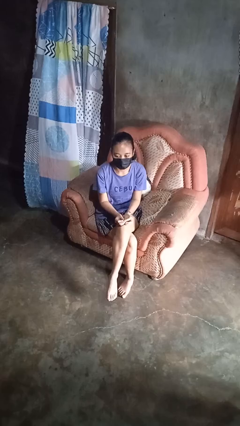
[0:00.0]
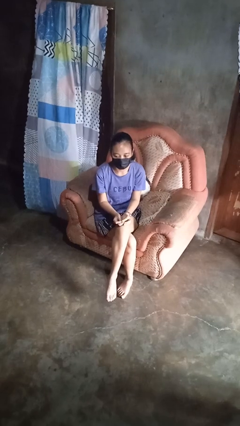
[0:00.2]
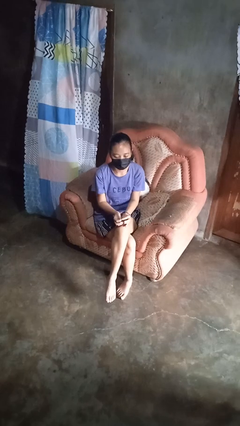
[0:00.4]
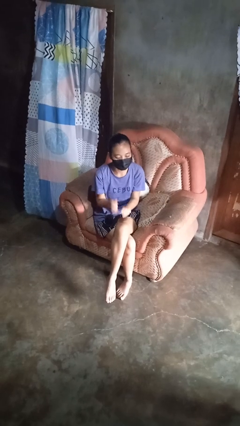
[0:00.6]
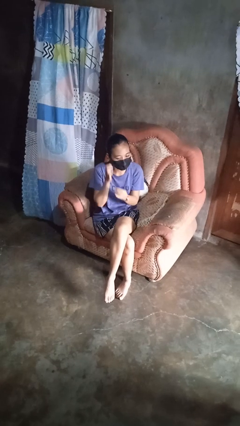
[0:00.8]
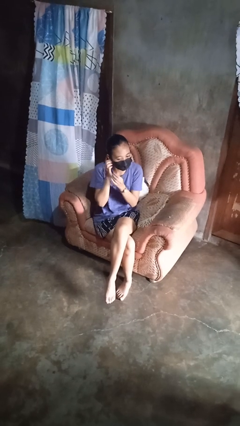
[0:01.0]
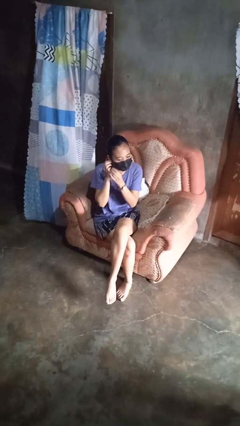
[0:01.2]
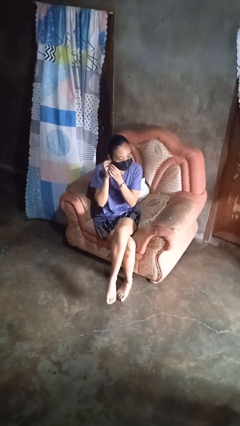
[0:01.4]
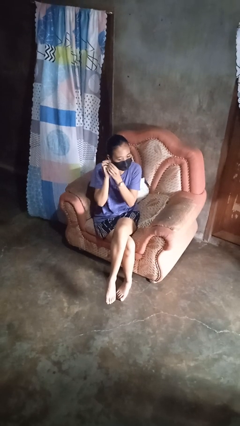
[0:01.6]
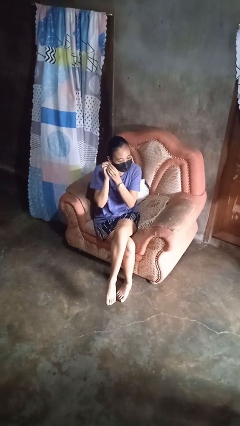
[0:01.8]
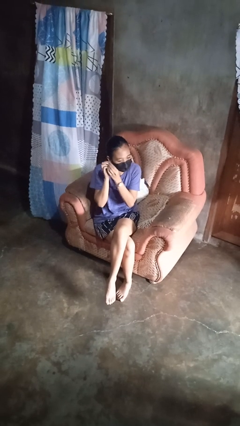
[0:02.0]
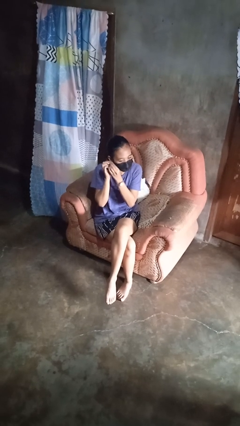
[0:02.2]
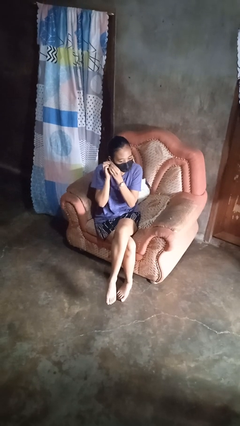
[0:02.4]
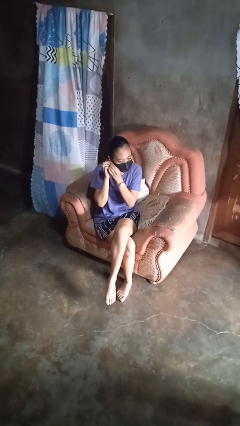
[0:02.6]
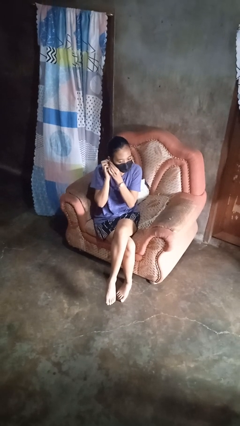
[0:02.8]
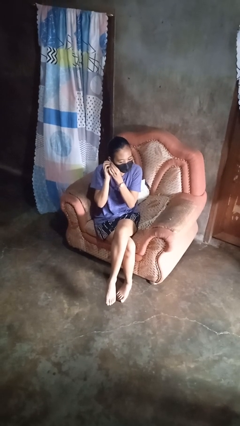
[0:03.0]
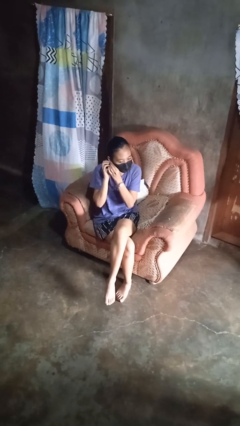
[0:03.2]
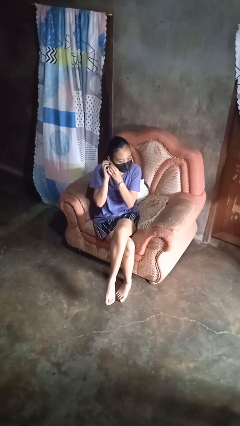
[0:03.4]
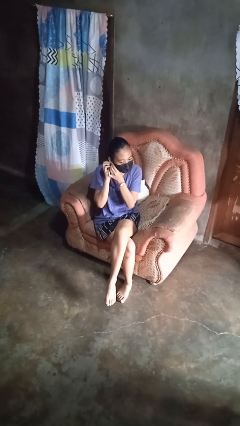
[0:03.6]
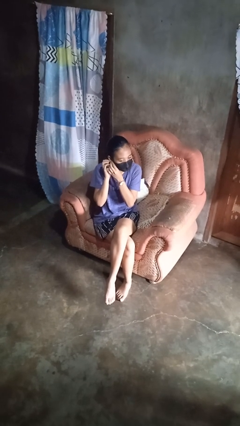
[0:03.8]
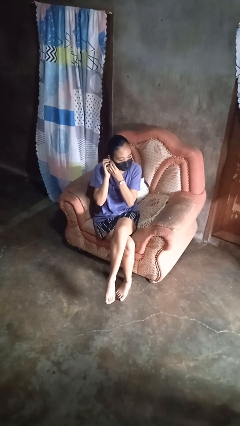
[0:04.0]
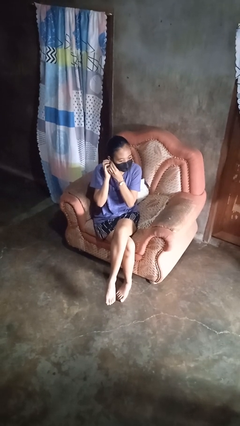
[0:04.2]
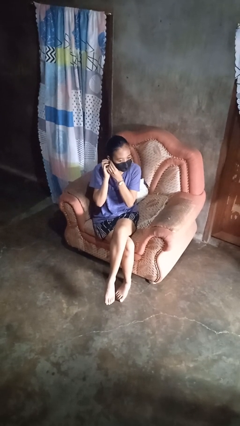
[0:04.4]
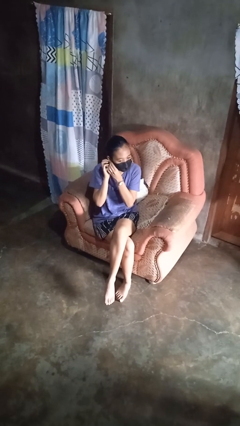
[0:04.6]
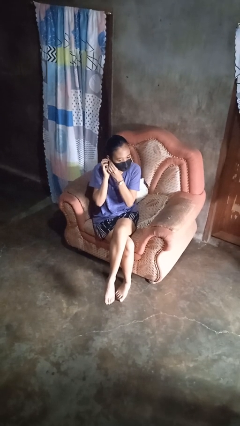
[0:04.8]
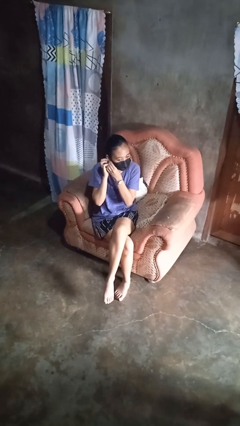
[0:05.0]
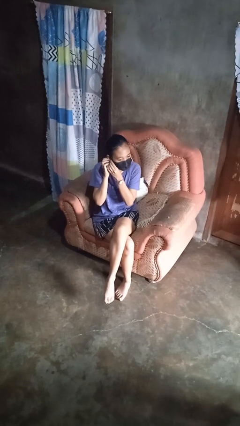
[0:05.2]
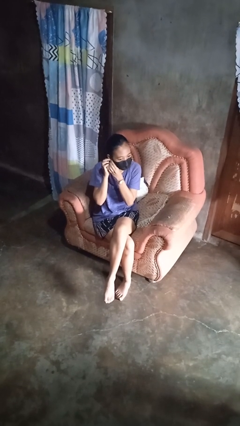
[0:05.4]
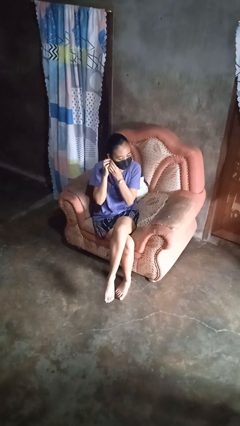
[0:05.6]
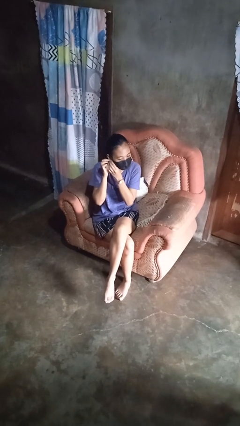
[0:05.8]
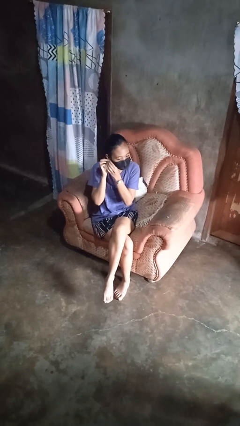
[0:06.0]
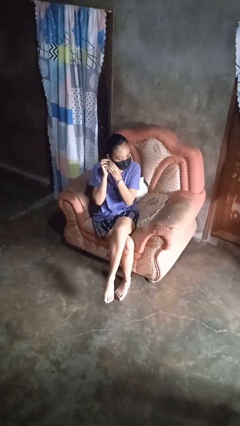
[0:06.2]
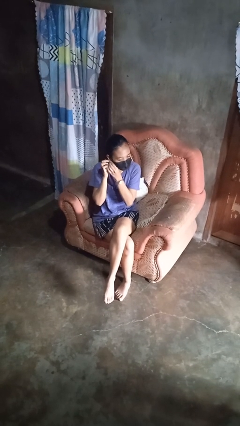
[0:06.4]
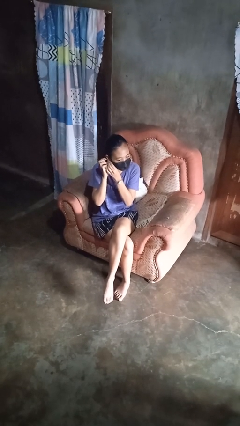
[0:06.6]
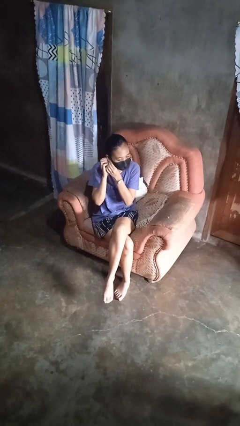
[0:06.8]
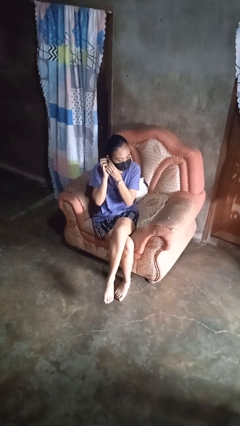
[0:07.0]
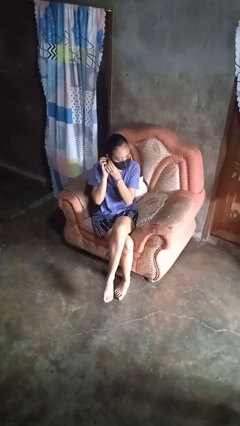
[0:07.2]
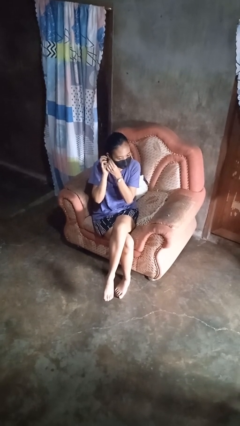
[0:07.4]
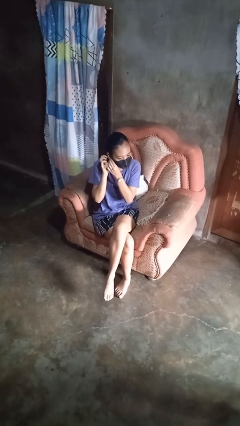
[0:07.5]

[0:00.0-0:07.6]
person puts on earrings

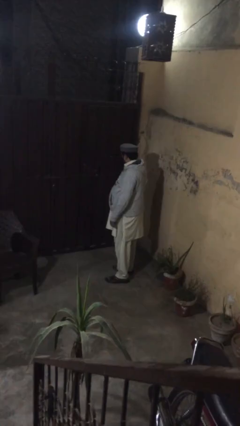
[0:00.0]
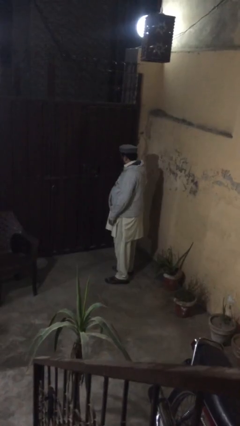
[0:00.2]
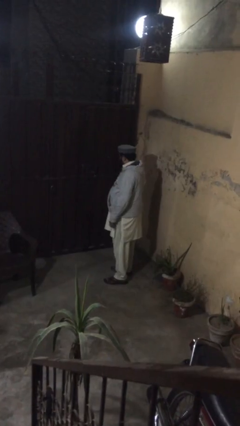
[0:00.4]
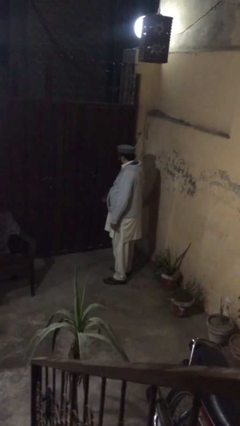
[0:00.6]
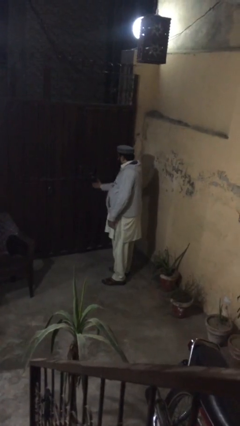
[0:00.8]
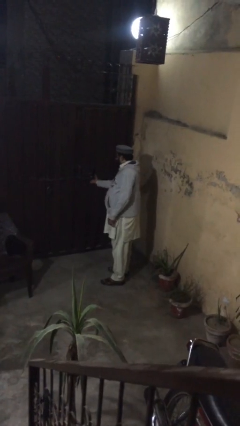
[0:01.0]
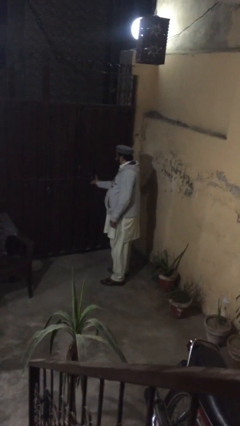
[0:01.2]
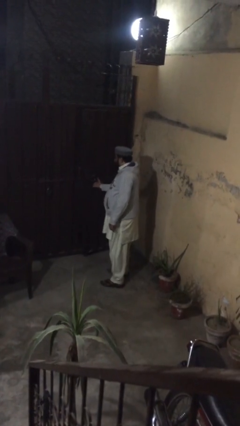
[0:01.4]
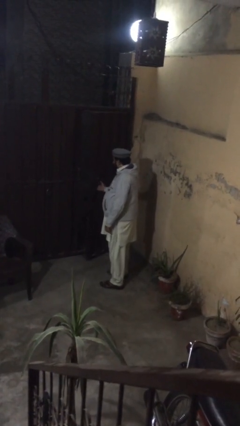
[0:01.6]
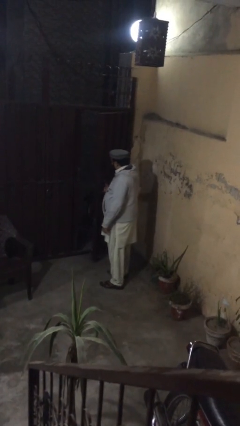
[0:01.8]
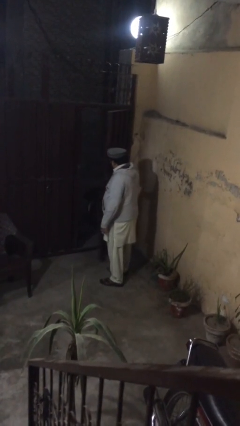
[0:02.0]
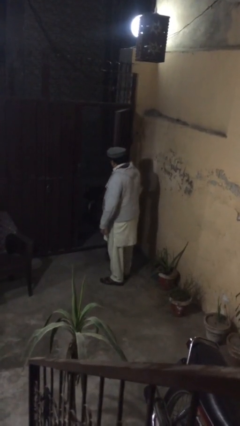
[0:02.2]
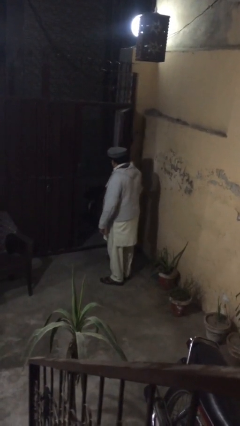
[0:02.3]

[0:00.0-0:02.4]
person opens facility door

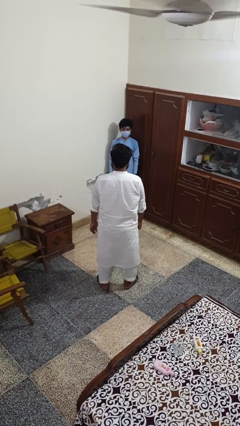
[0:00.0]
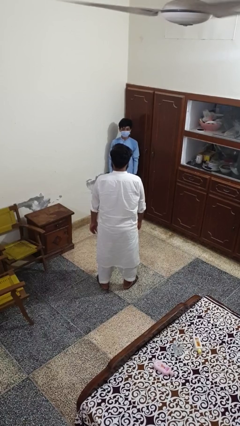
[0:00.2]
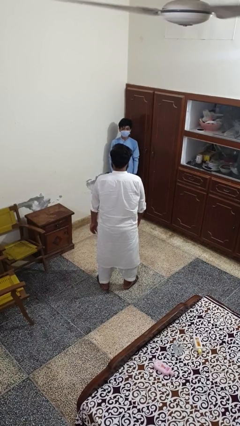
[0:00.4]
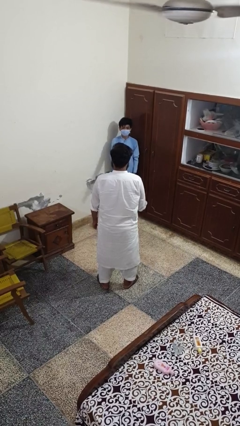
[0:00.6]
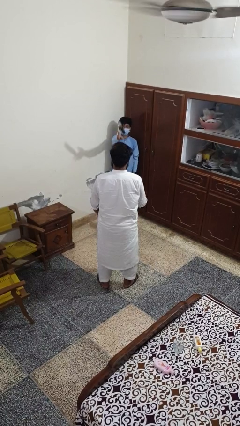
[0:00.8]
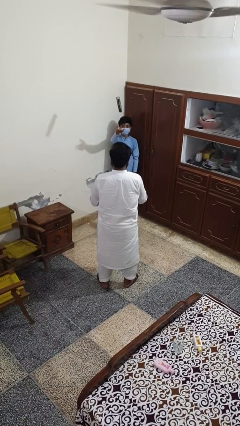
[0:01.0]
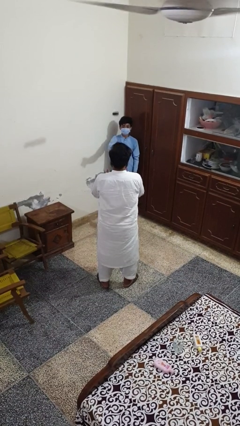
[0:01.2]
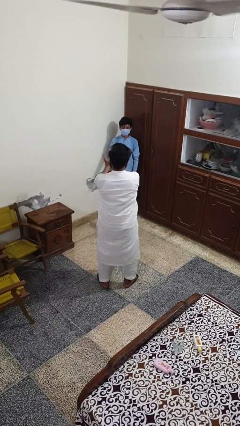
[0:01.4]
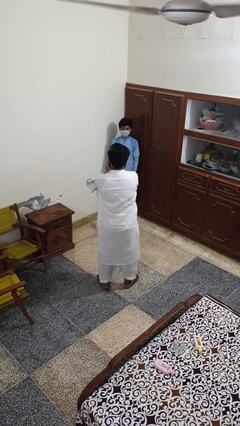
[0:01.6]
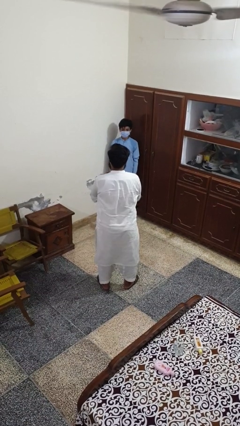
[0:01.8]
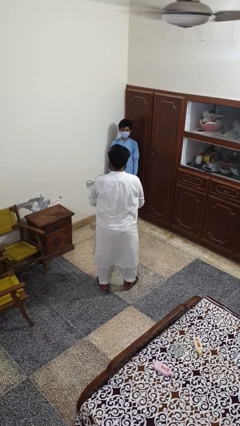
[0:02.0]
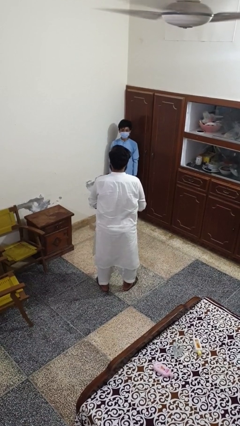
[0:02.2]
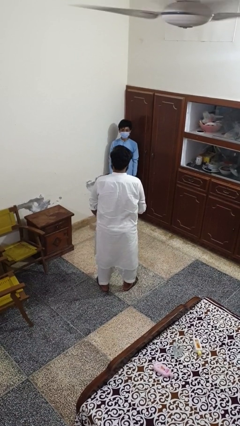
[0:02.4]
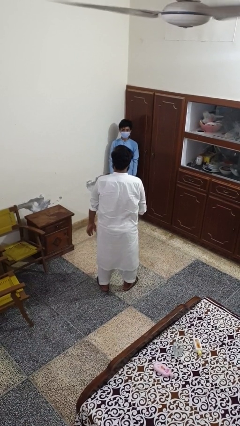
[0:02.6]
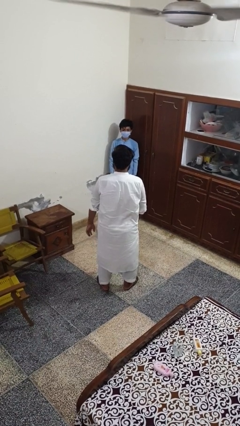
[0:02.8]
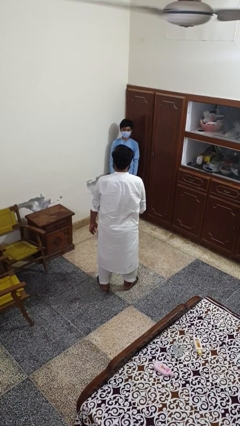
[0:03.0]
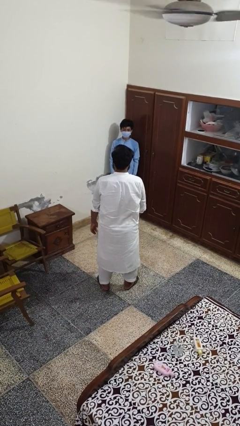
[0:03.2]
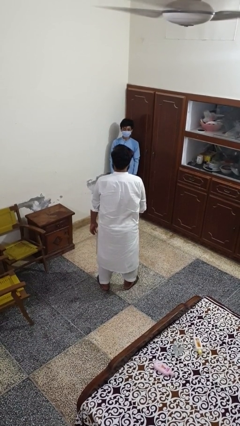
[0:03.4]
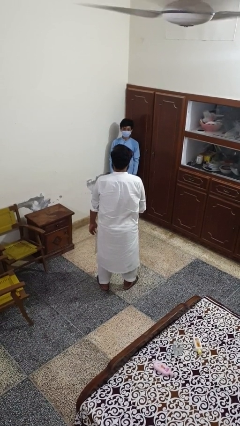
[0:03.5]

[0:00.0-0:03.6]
person catches object from person

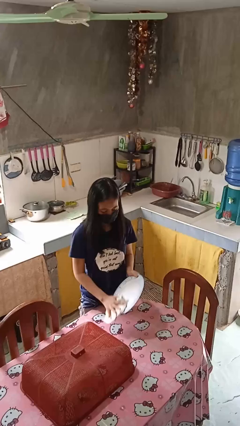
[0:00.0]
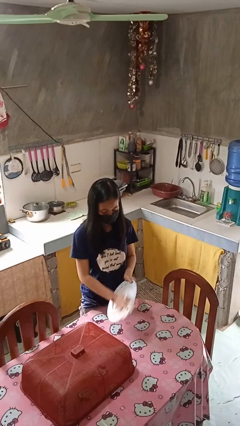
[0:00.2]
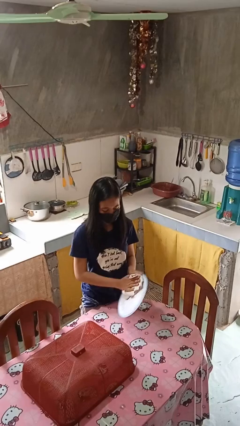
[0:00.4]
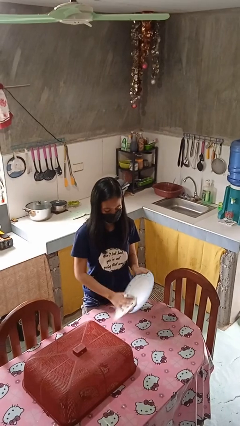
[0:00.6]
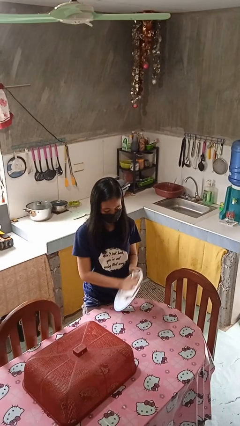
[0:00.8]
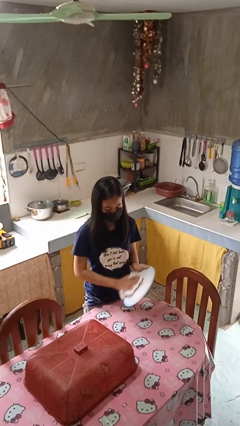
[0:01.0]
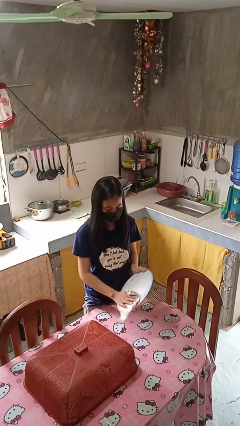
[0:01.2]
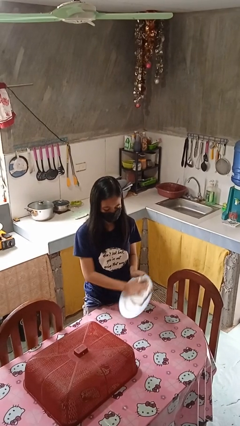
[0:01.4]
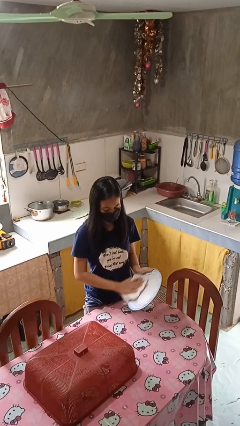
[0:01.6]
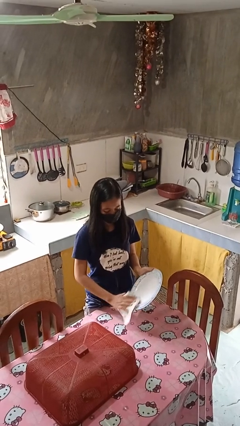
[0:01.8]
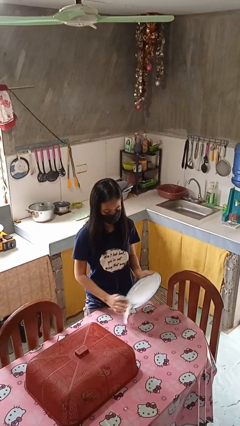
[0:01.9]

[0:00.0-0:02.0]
person dries dish

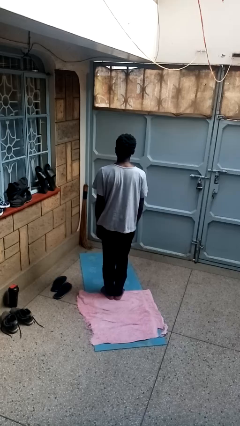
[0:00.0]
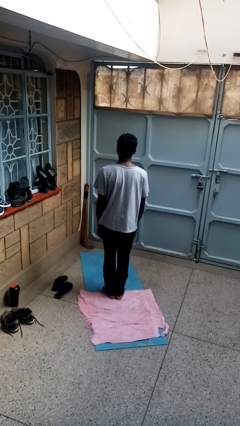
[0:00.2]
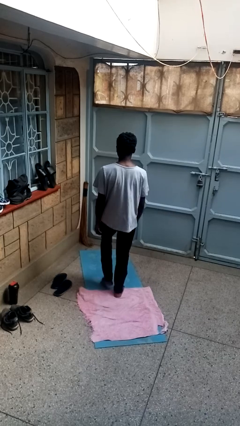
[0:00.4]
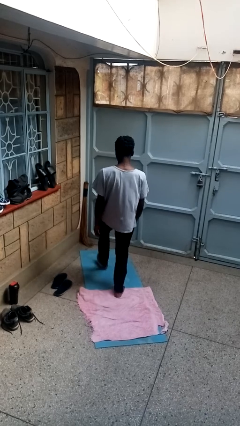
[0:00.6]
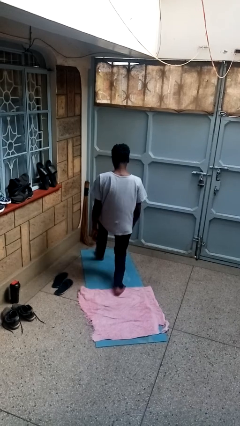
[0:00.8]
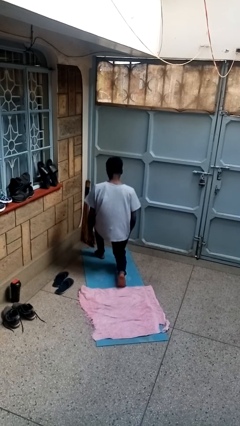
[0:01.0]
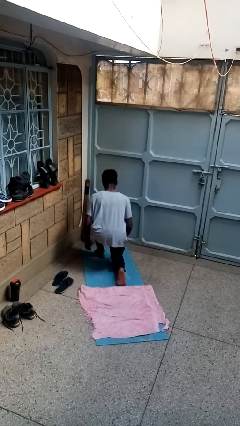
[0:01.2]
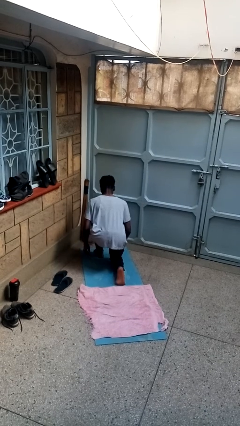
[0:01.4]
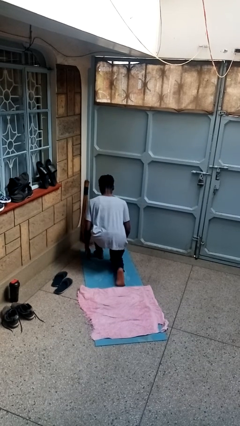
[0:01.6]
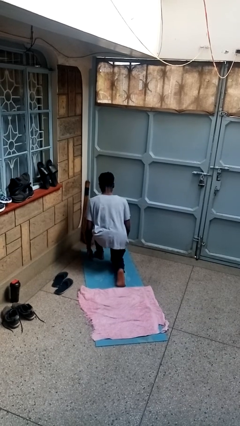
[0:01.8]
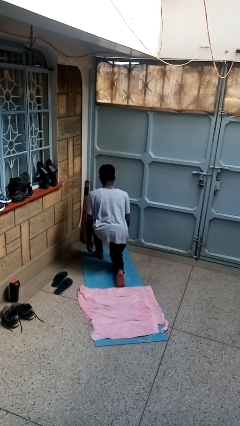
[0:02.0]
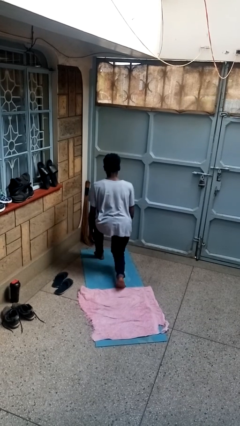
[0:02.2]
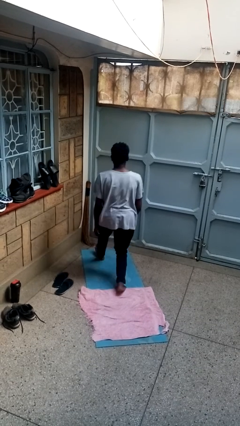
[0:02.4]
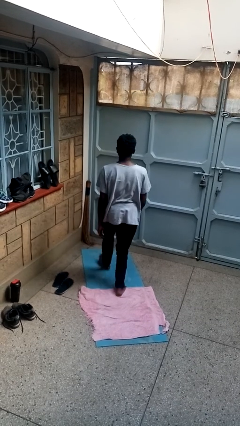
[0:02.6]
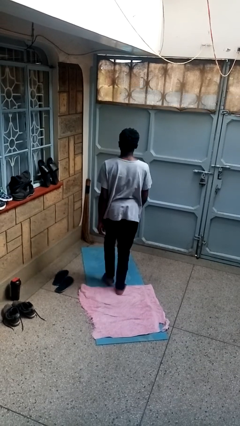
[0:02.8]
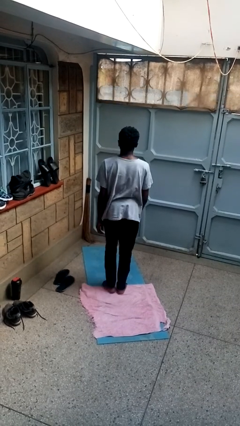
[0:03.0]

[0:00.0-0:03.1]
person exercises with lunges
